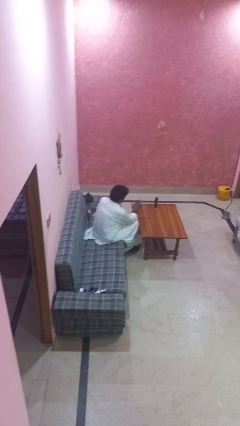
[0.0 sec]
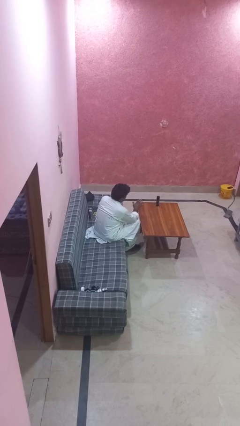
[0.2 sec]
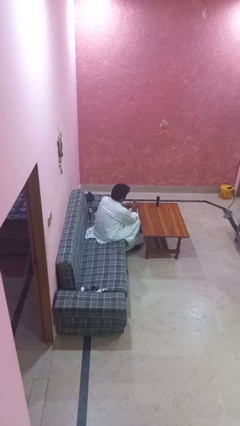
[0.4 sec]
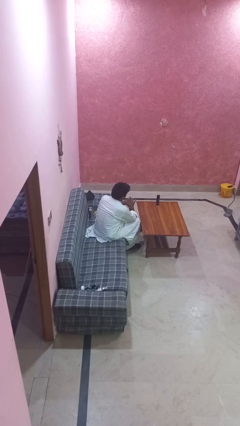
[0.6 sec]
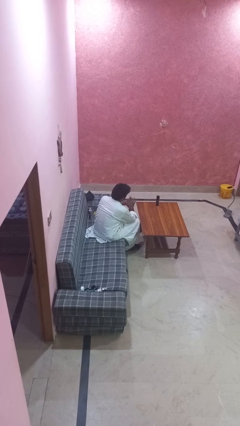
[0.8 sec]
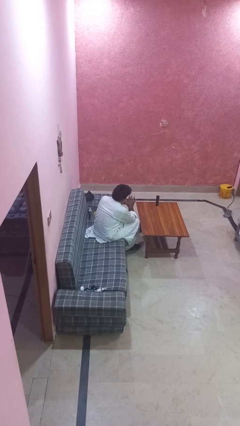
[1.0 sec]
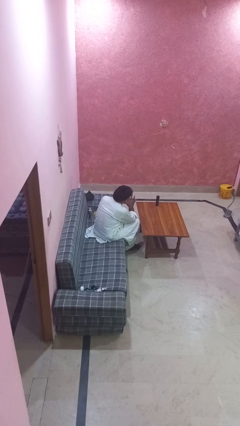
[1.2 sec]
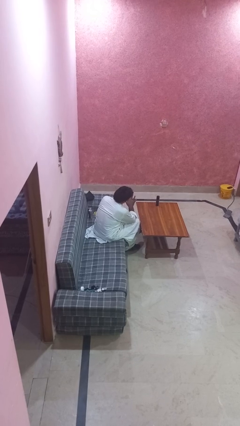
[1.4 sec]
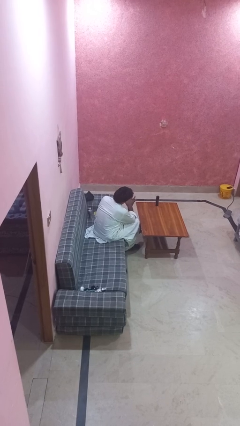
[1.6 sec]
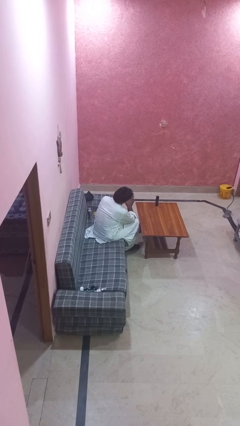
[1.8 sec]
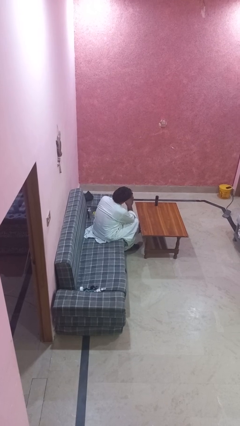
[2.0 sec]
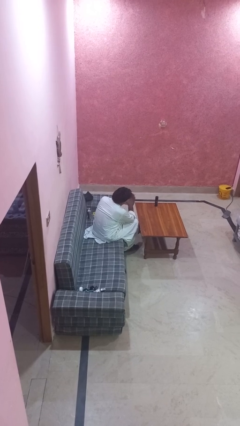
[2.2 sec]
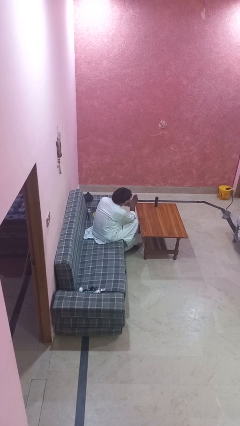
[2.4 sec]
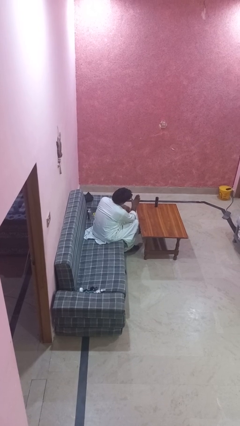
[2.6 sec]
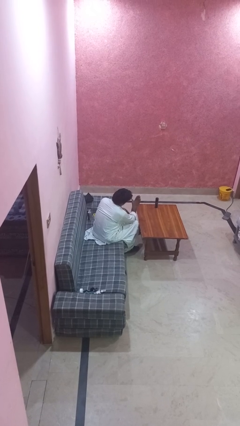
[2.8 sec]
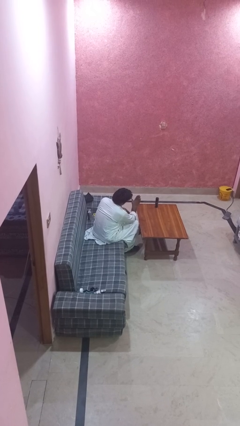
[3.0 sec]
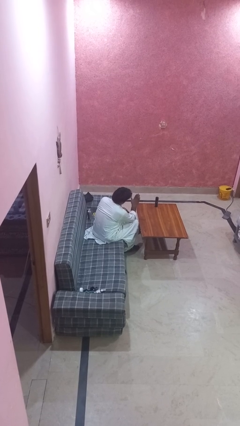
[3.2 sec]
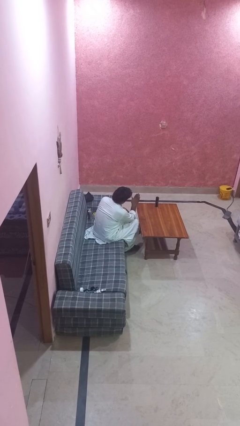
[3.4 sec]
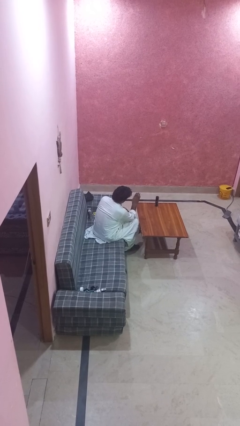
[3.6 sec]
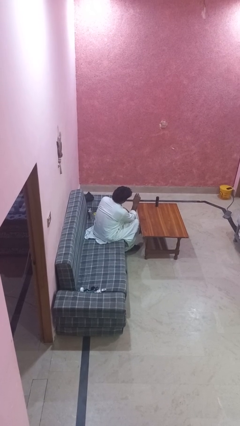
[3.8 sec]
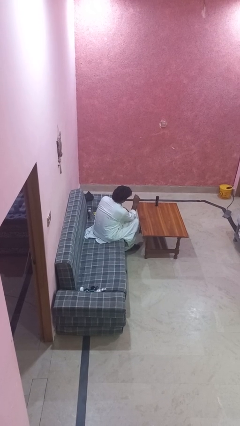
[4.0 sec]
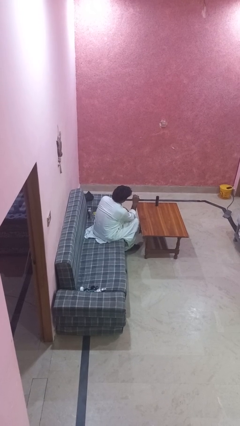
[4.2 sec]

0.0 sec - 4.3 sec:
person puts on ring

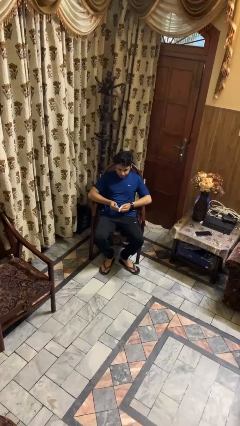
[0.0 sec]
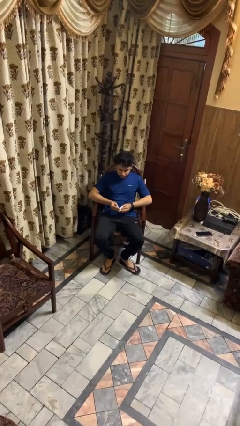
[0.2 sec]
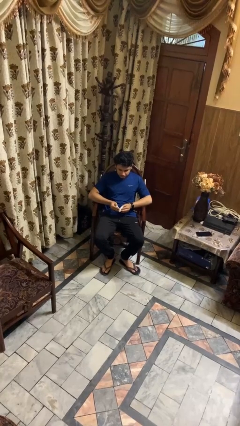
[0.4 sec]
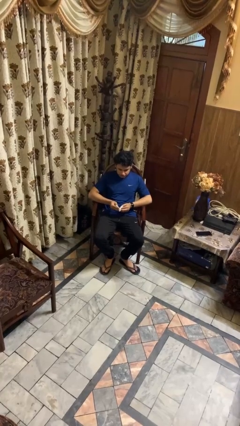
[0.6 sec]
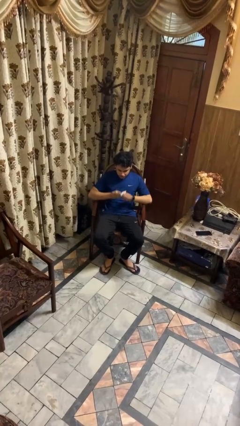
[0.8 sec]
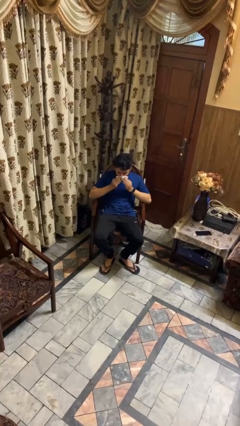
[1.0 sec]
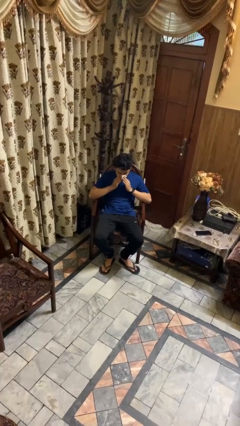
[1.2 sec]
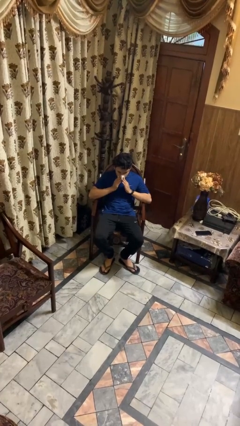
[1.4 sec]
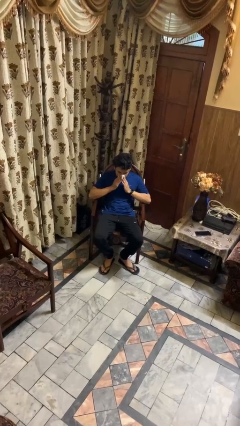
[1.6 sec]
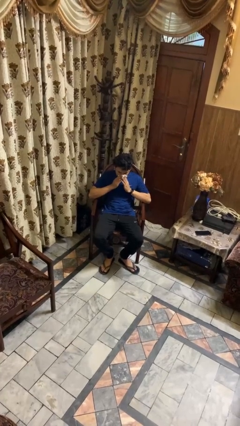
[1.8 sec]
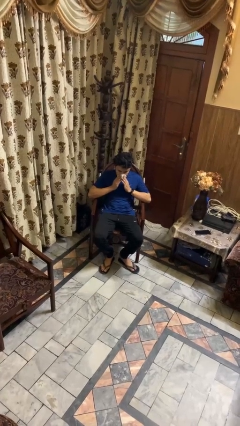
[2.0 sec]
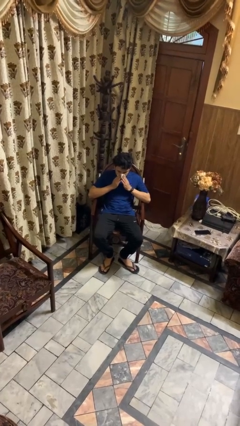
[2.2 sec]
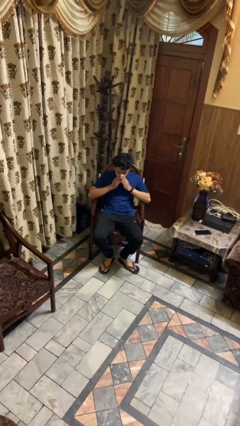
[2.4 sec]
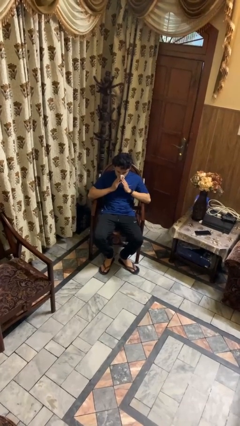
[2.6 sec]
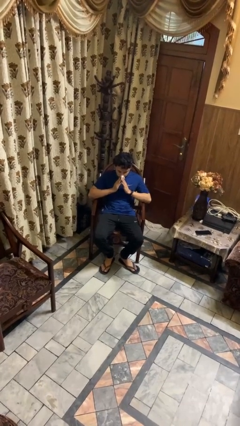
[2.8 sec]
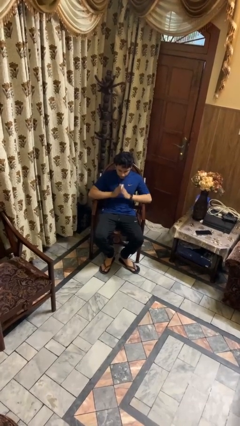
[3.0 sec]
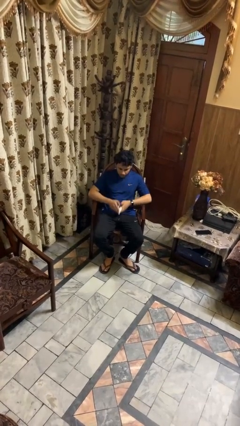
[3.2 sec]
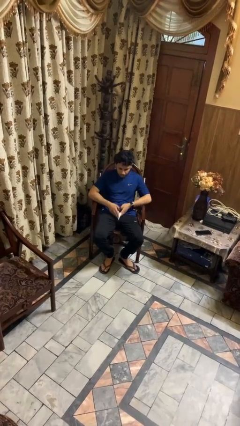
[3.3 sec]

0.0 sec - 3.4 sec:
person blows nose

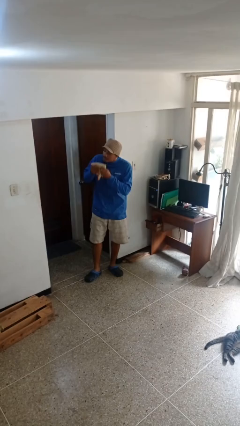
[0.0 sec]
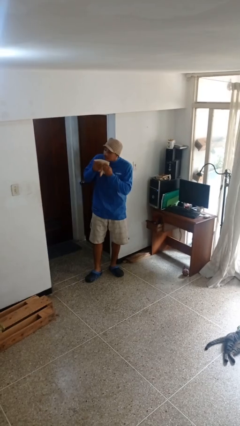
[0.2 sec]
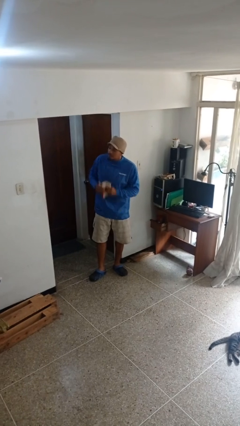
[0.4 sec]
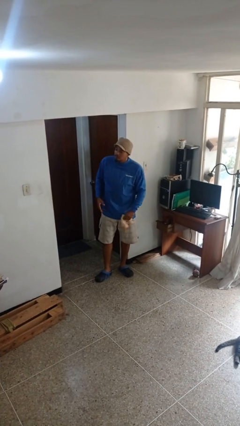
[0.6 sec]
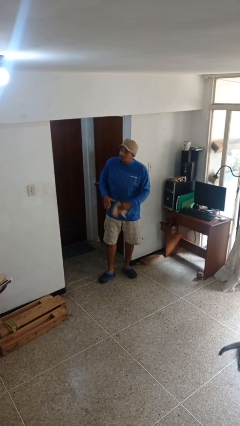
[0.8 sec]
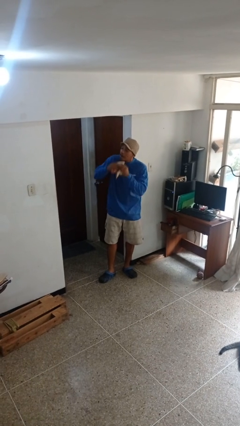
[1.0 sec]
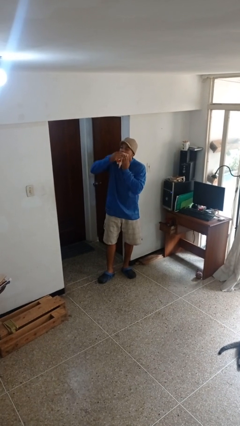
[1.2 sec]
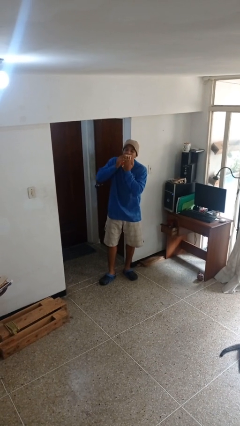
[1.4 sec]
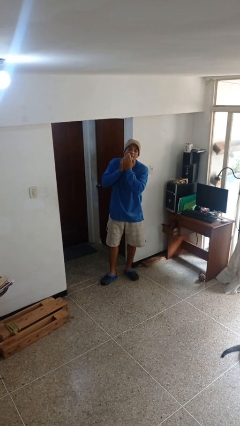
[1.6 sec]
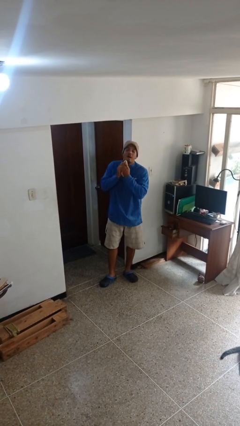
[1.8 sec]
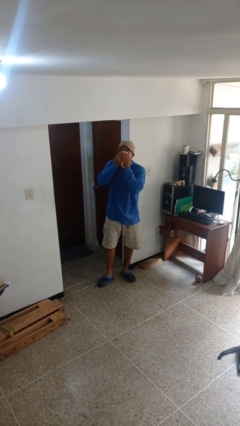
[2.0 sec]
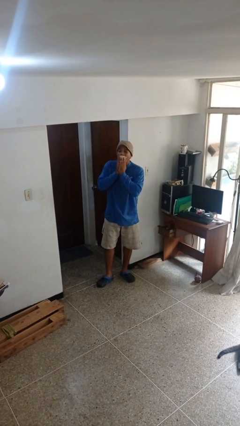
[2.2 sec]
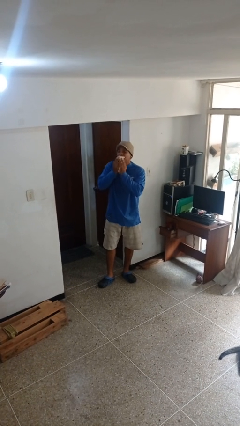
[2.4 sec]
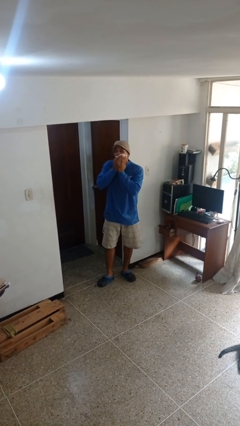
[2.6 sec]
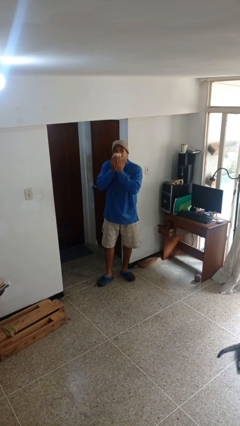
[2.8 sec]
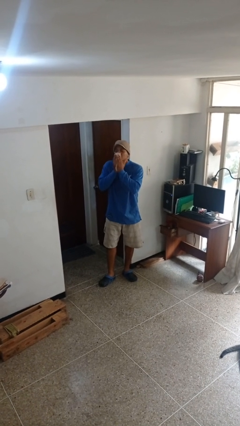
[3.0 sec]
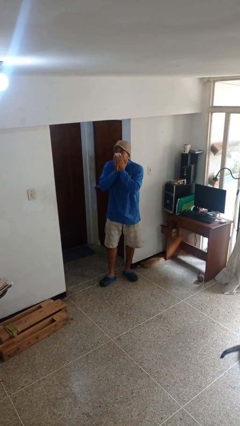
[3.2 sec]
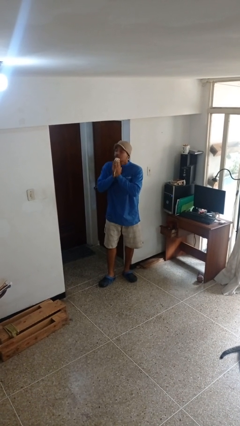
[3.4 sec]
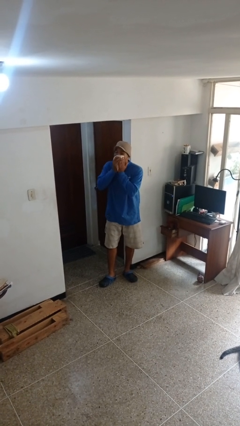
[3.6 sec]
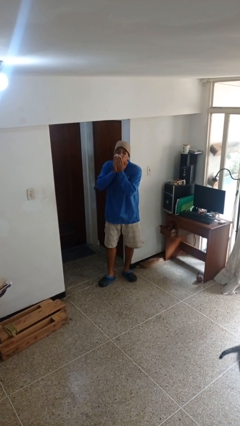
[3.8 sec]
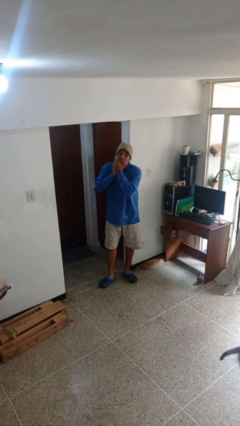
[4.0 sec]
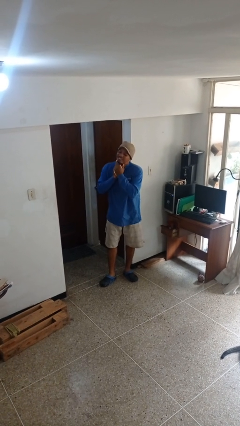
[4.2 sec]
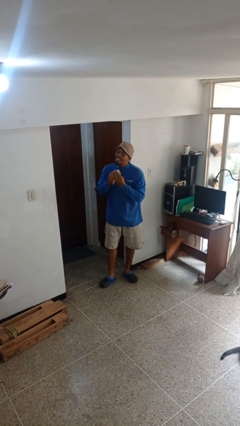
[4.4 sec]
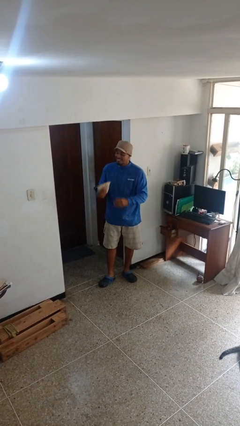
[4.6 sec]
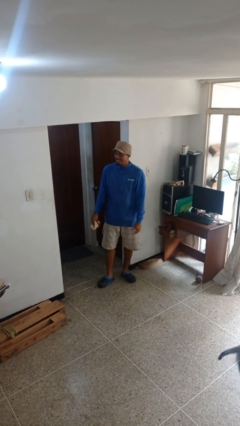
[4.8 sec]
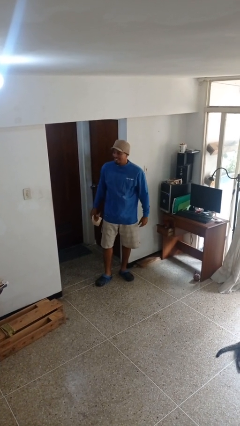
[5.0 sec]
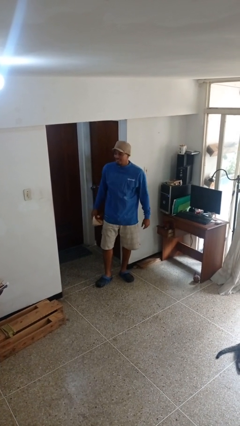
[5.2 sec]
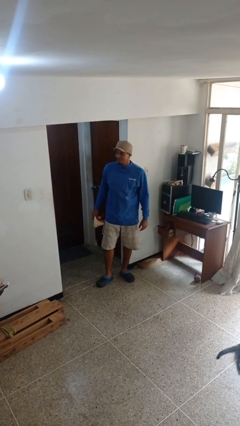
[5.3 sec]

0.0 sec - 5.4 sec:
person wipes mouth with napkin

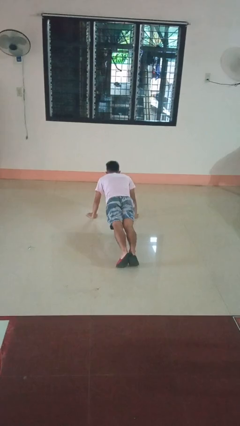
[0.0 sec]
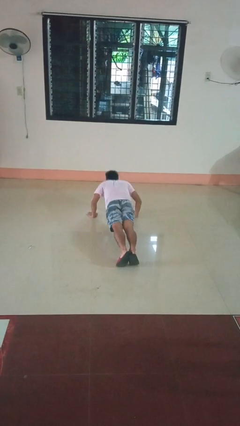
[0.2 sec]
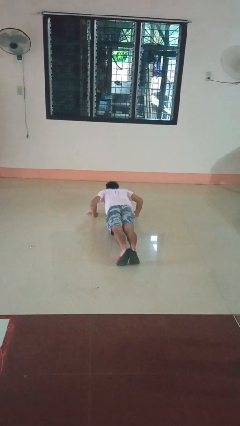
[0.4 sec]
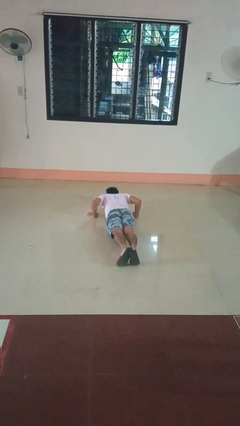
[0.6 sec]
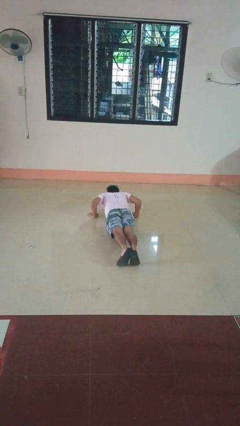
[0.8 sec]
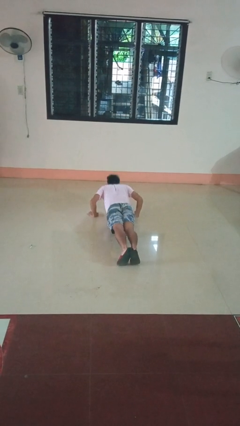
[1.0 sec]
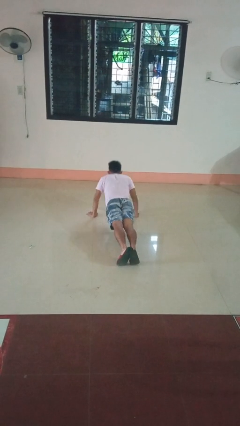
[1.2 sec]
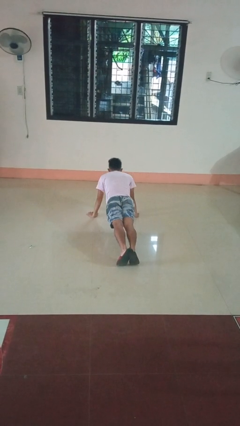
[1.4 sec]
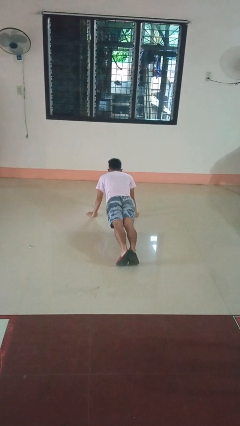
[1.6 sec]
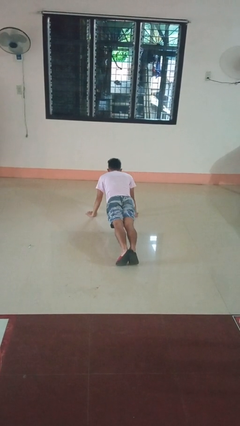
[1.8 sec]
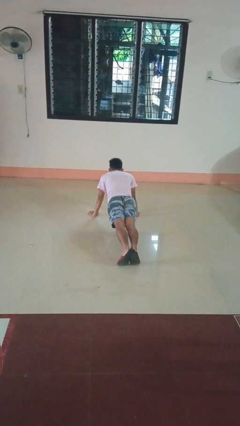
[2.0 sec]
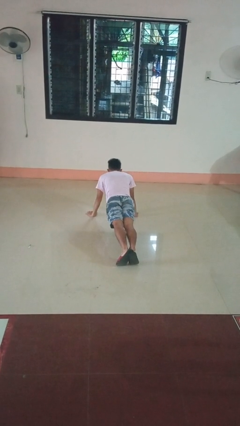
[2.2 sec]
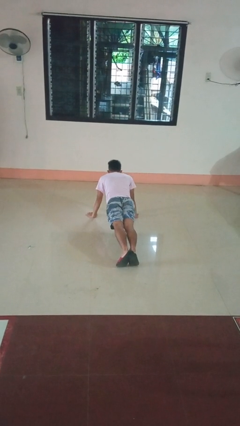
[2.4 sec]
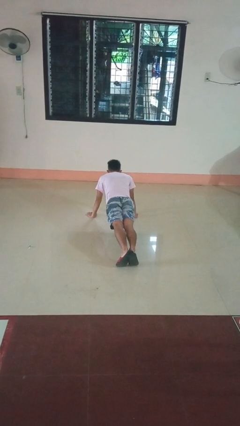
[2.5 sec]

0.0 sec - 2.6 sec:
person exercises with pushup

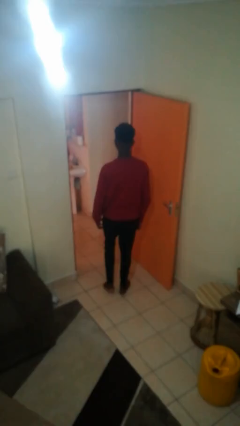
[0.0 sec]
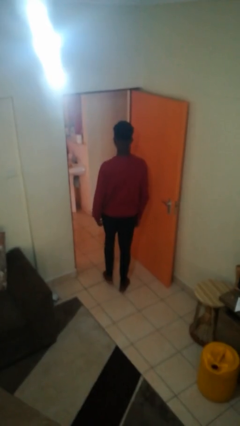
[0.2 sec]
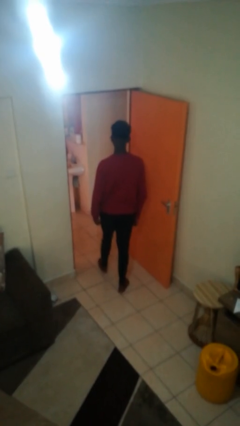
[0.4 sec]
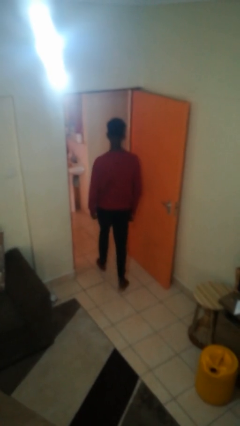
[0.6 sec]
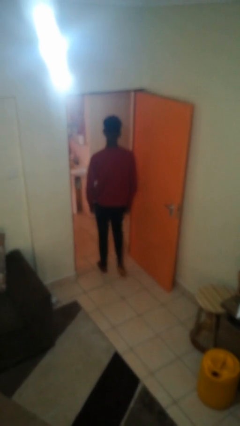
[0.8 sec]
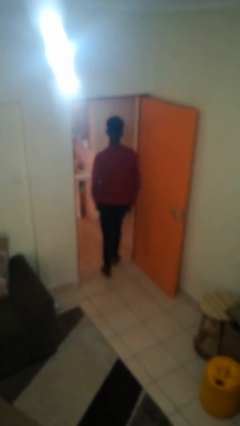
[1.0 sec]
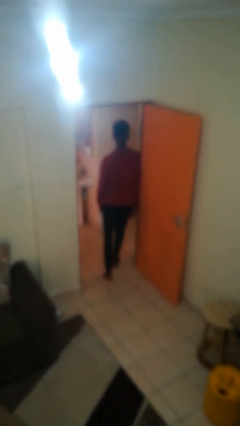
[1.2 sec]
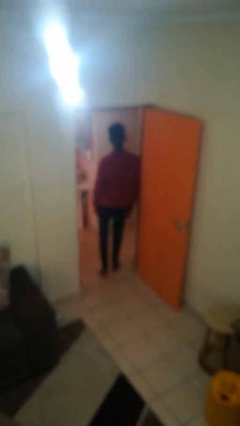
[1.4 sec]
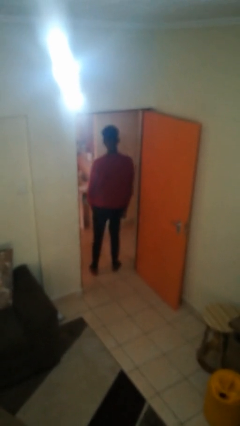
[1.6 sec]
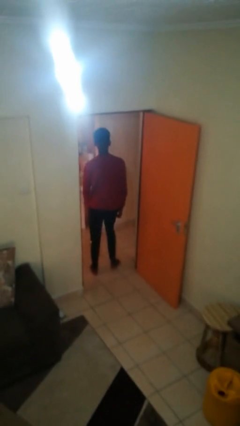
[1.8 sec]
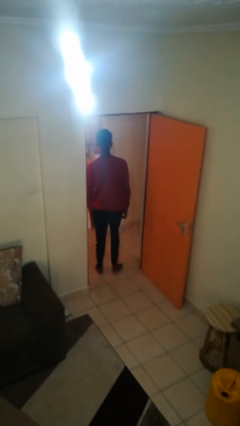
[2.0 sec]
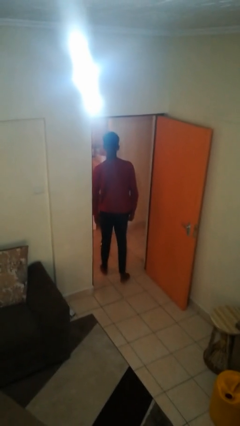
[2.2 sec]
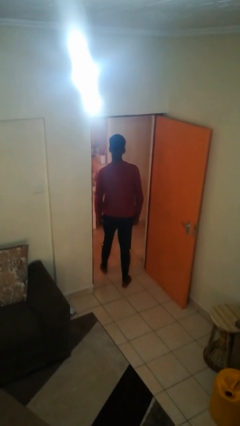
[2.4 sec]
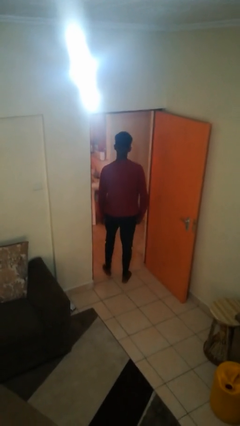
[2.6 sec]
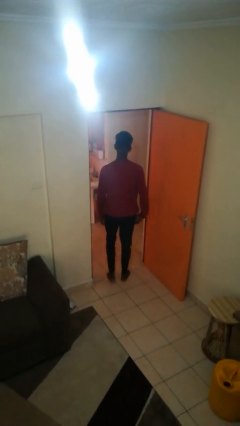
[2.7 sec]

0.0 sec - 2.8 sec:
person bumps into wall
